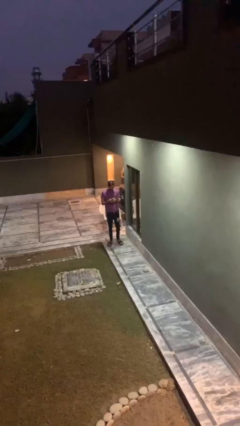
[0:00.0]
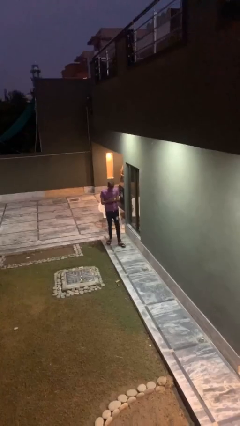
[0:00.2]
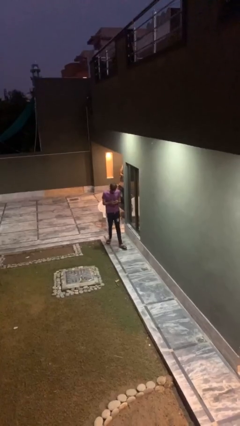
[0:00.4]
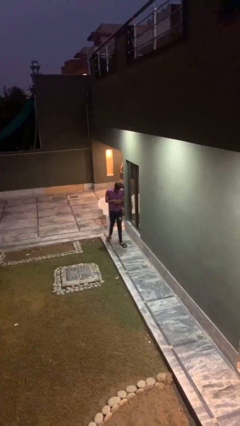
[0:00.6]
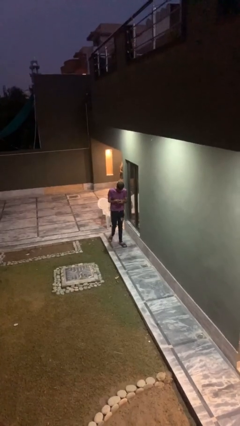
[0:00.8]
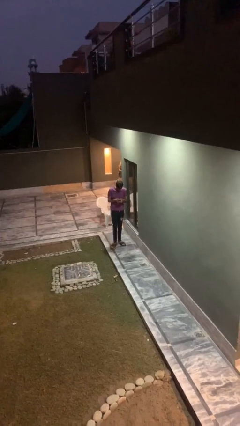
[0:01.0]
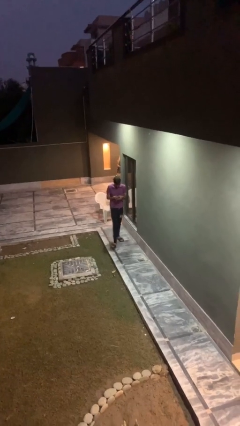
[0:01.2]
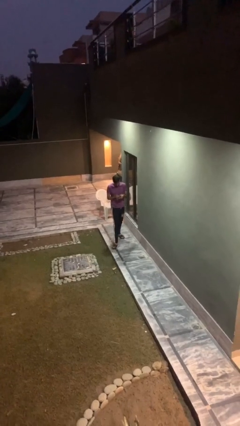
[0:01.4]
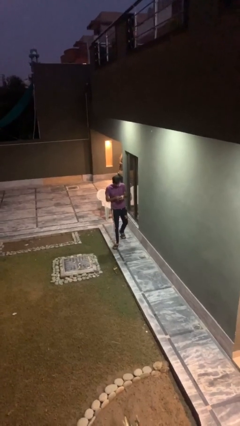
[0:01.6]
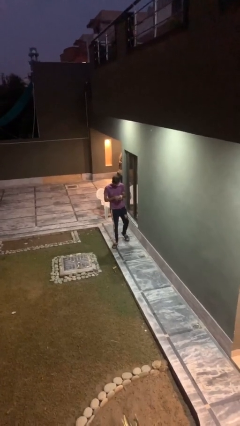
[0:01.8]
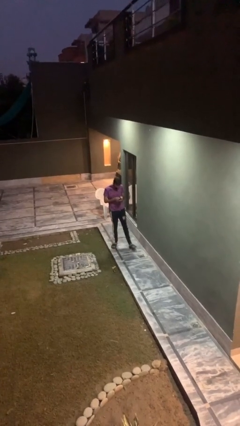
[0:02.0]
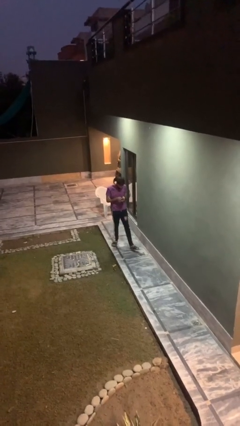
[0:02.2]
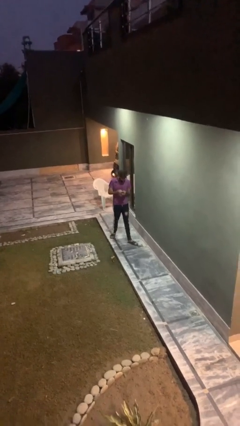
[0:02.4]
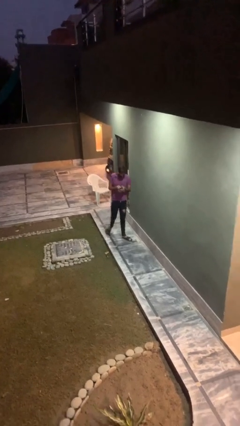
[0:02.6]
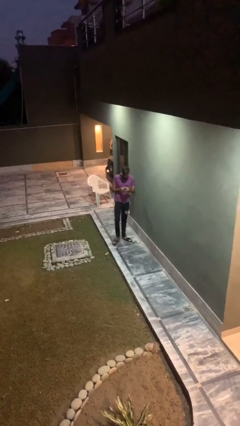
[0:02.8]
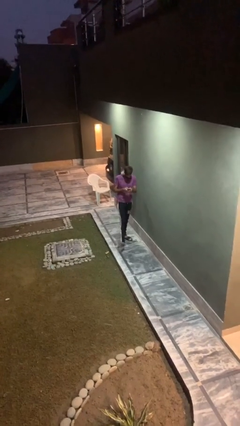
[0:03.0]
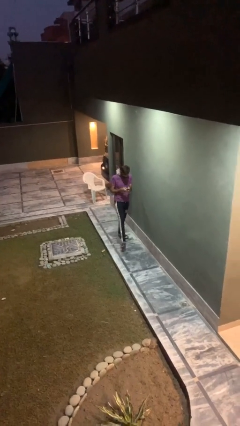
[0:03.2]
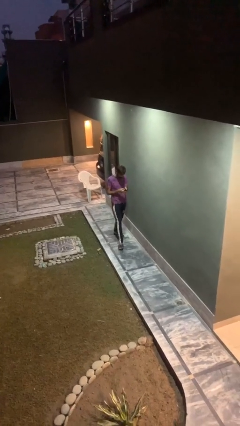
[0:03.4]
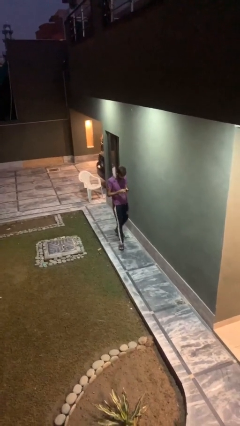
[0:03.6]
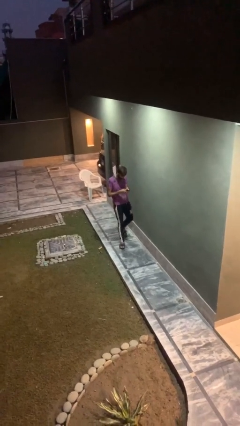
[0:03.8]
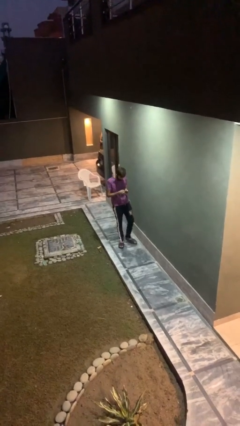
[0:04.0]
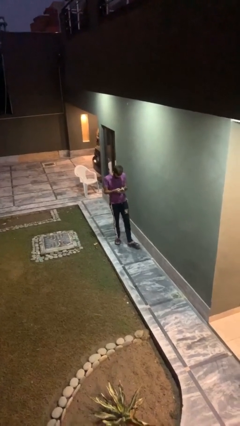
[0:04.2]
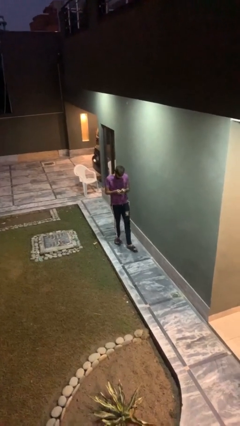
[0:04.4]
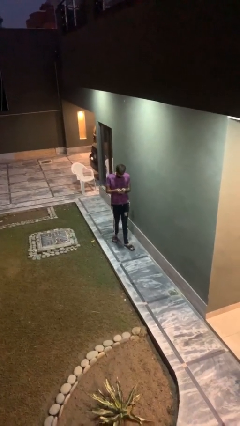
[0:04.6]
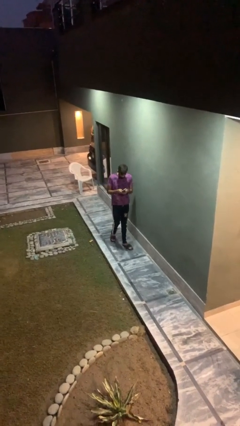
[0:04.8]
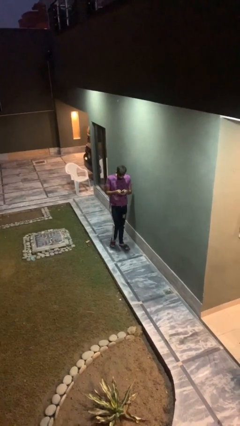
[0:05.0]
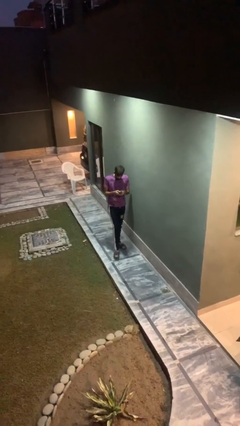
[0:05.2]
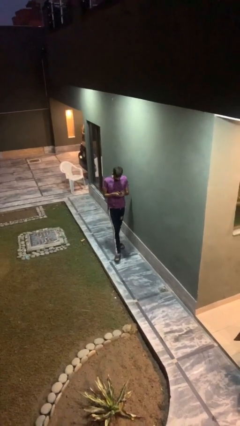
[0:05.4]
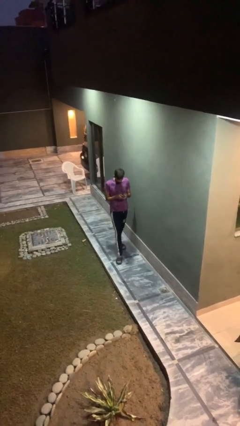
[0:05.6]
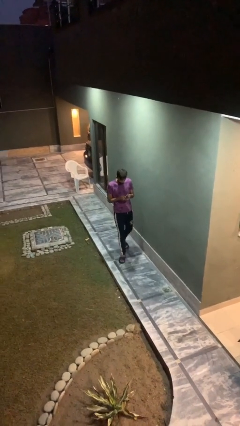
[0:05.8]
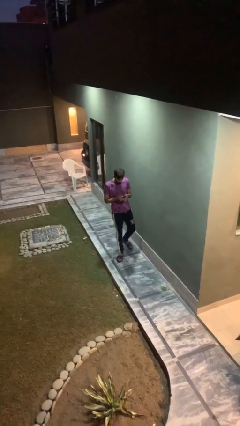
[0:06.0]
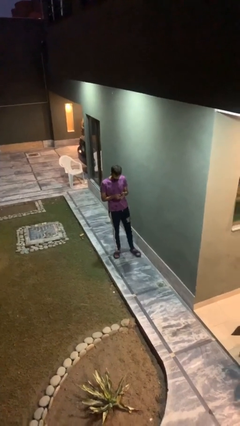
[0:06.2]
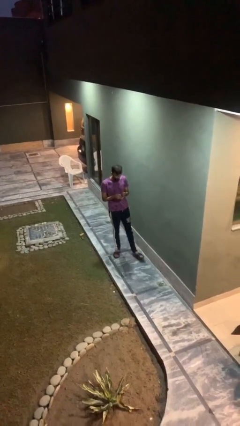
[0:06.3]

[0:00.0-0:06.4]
person texts on phone

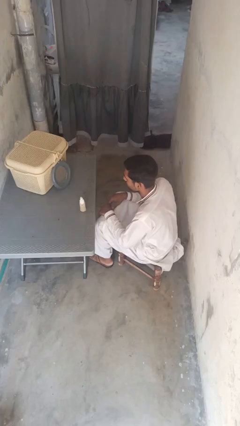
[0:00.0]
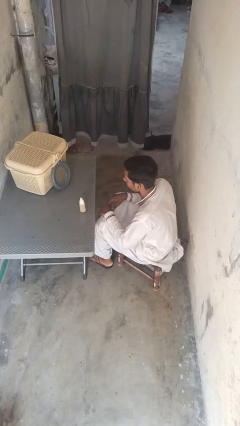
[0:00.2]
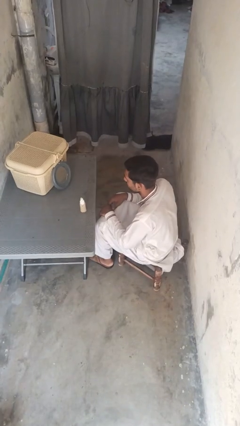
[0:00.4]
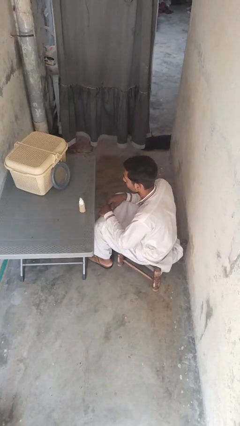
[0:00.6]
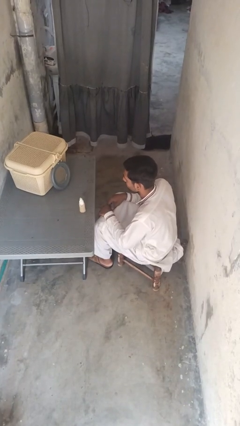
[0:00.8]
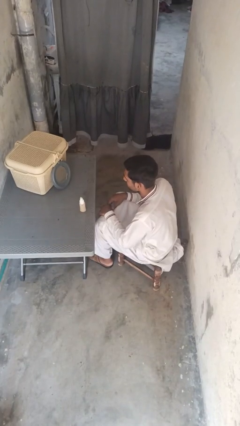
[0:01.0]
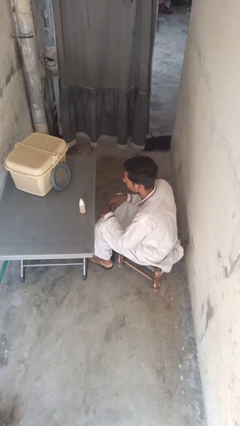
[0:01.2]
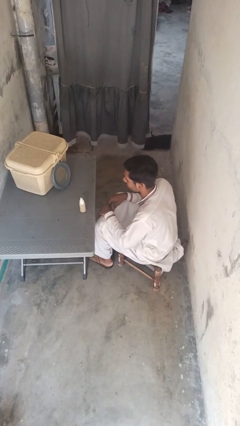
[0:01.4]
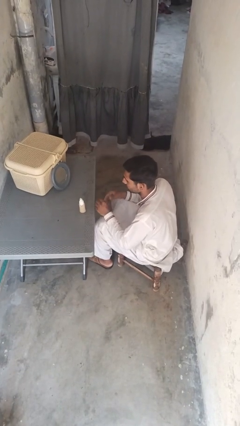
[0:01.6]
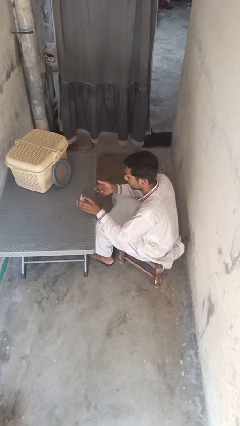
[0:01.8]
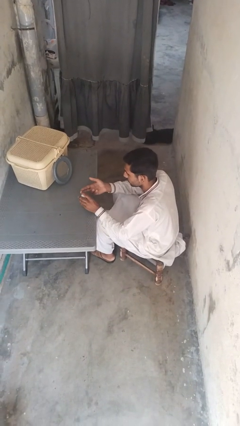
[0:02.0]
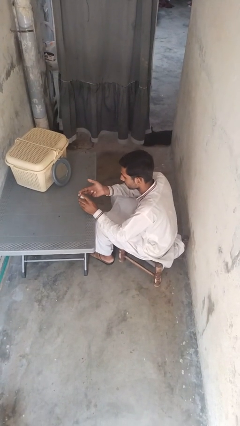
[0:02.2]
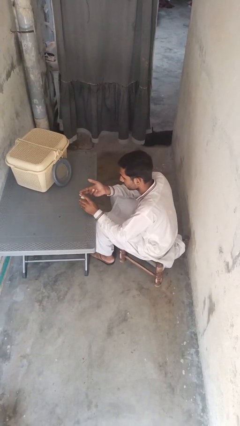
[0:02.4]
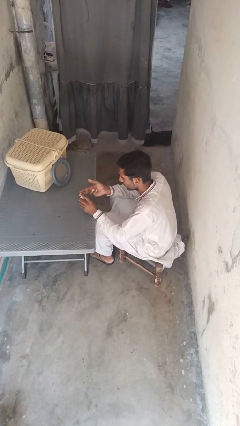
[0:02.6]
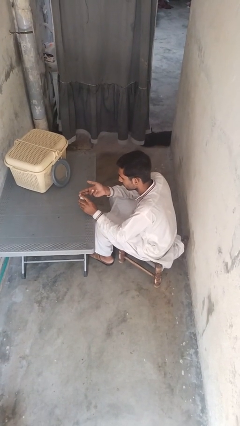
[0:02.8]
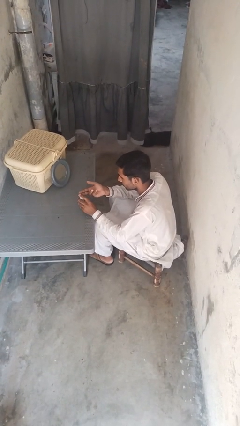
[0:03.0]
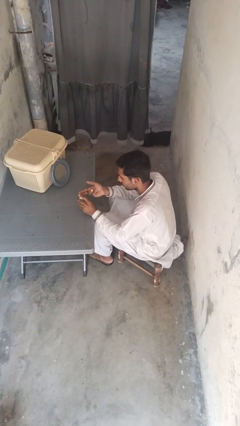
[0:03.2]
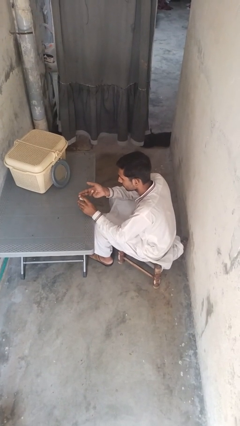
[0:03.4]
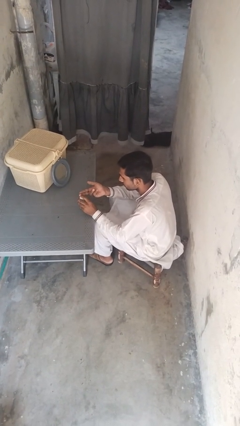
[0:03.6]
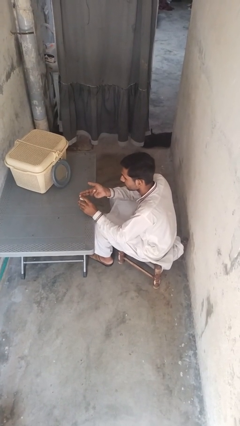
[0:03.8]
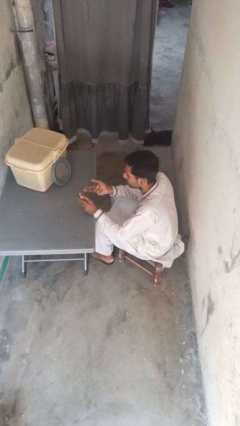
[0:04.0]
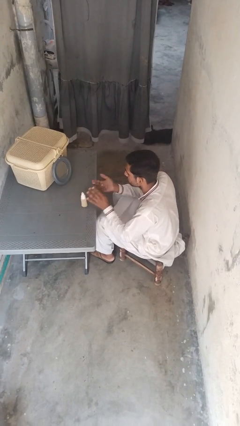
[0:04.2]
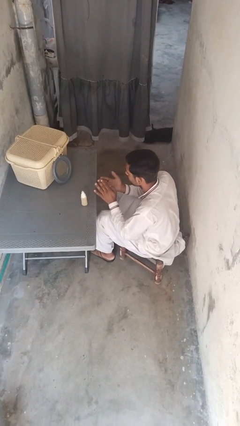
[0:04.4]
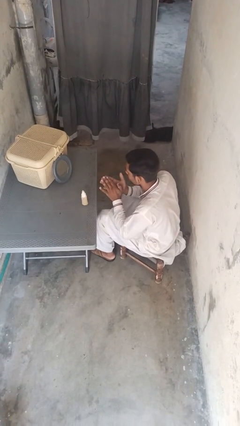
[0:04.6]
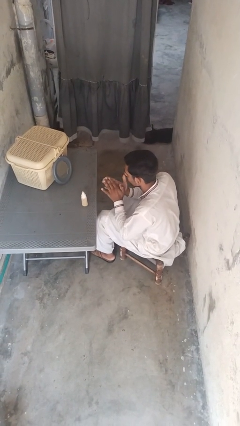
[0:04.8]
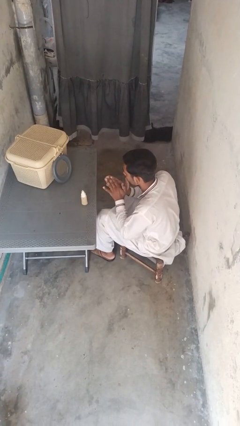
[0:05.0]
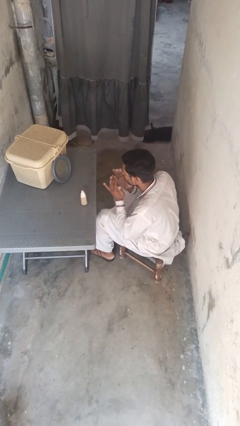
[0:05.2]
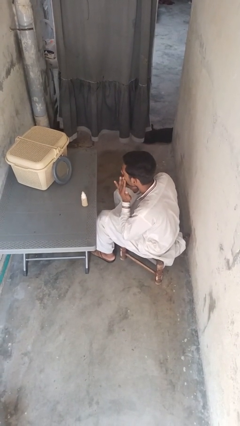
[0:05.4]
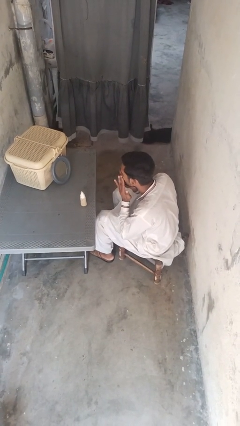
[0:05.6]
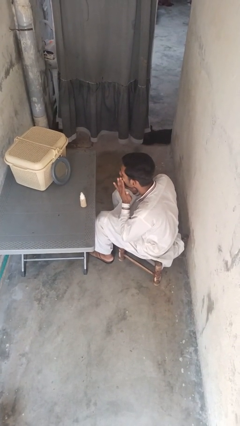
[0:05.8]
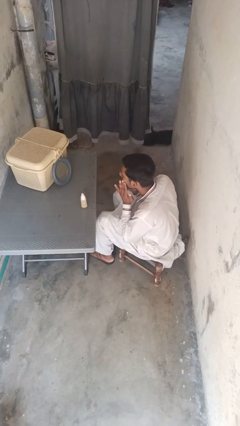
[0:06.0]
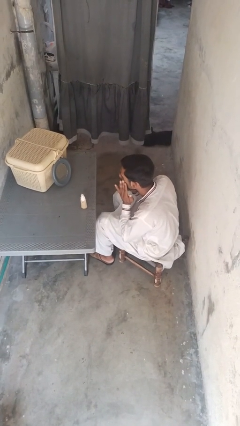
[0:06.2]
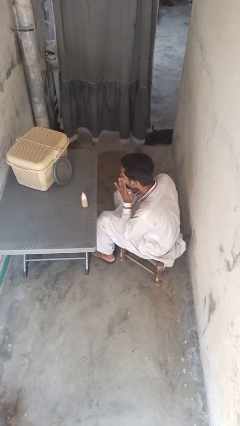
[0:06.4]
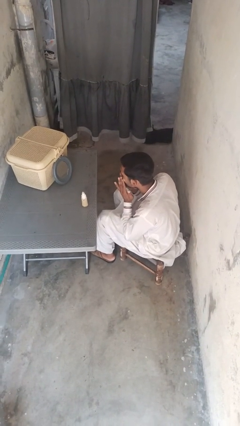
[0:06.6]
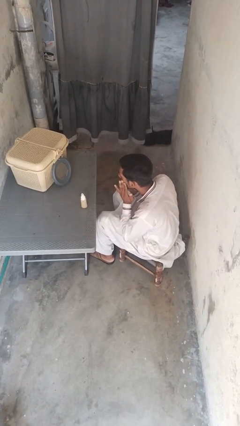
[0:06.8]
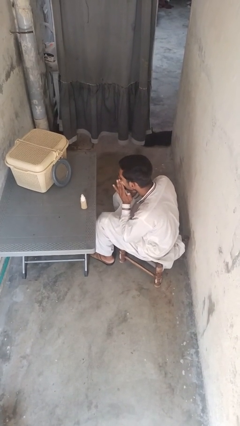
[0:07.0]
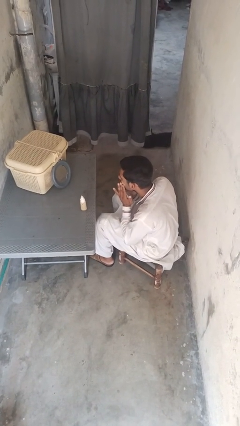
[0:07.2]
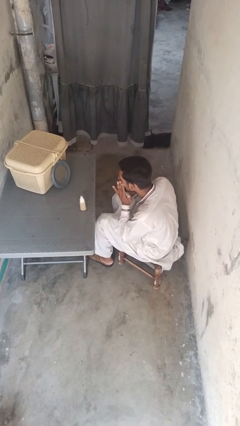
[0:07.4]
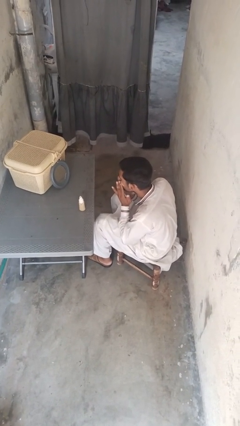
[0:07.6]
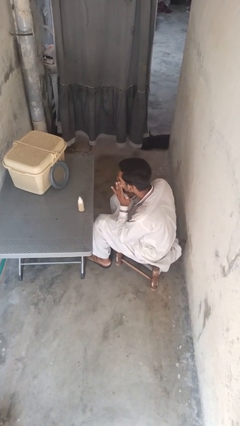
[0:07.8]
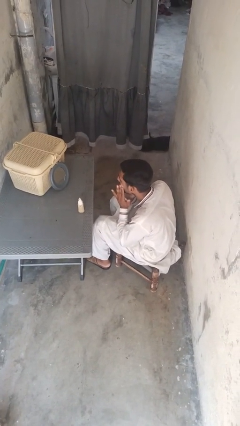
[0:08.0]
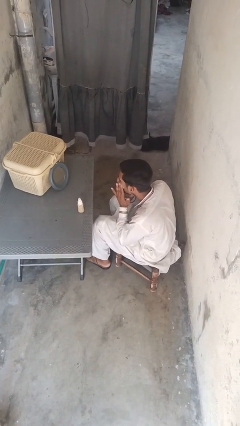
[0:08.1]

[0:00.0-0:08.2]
person applies foundation makeup

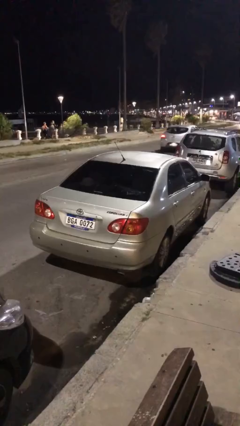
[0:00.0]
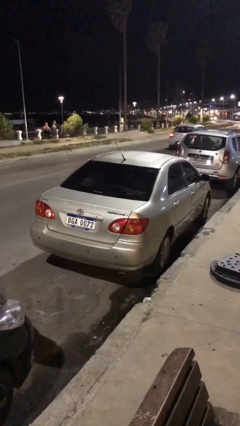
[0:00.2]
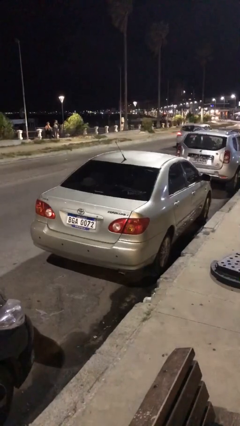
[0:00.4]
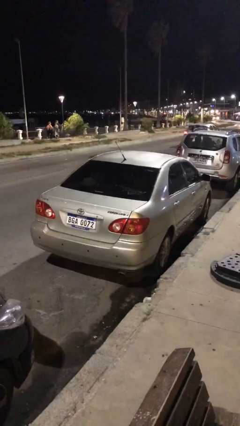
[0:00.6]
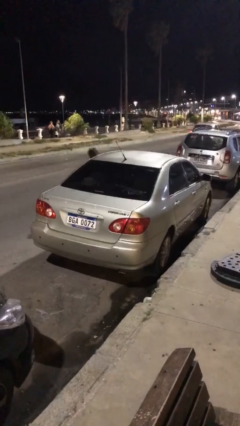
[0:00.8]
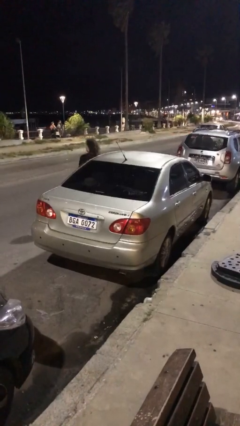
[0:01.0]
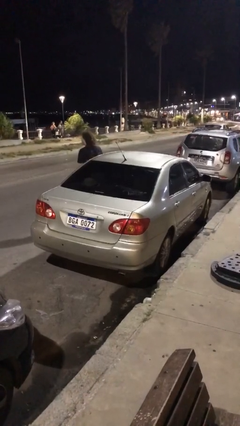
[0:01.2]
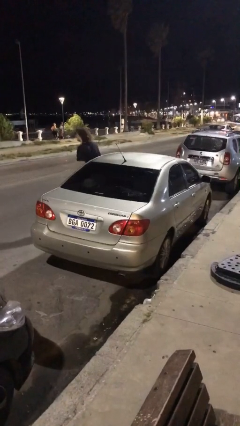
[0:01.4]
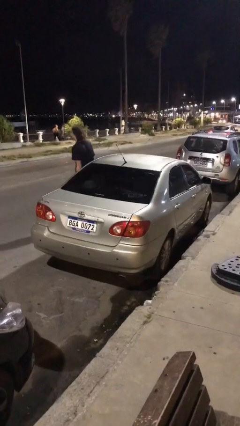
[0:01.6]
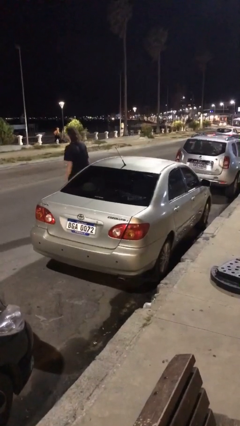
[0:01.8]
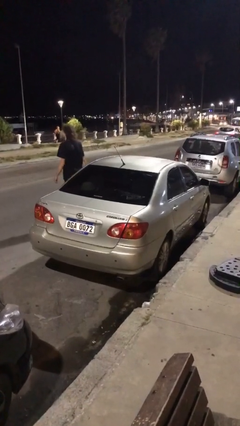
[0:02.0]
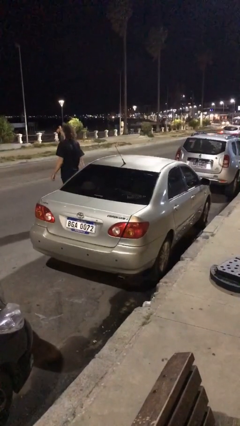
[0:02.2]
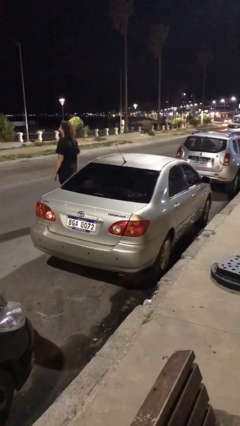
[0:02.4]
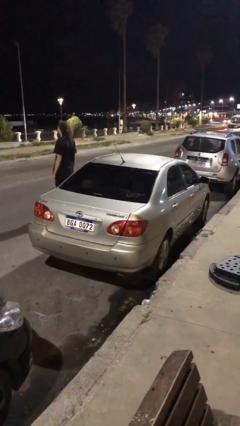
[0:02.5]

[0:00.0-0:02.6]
car drops off person

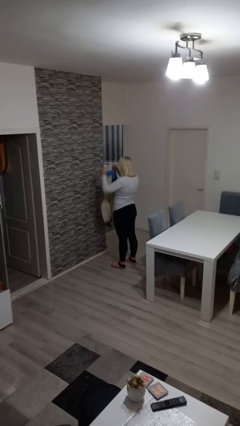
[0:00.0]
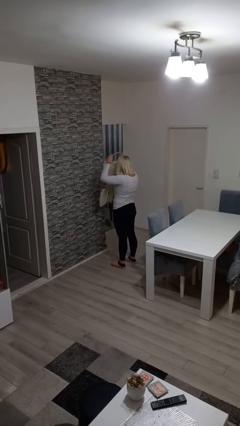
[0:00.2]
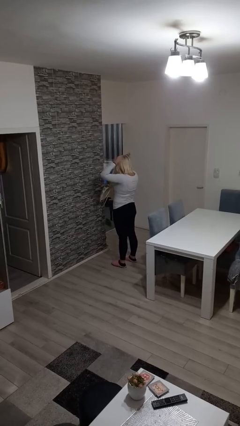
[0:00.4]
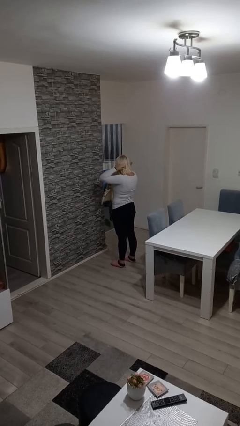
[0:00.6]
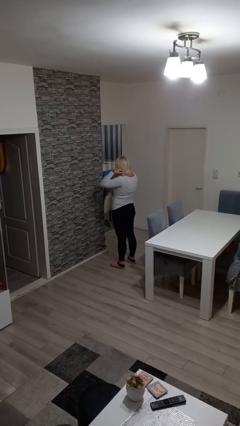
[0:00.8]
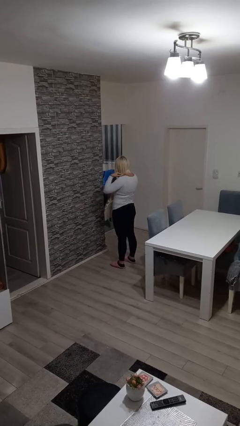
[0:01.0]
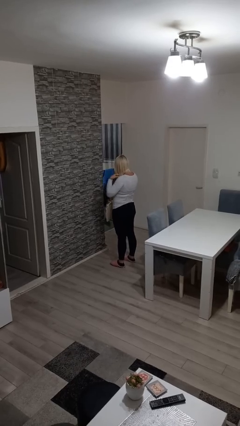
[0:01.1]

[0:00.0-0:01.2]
person puts on apron
